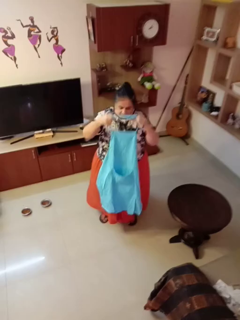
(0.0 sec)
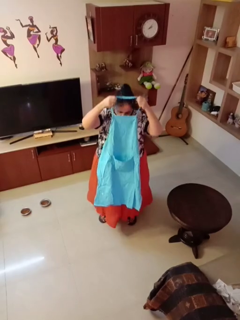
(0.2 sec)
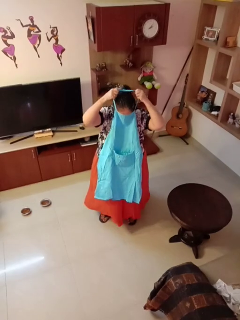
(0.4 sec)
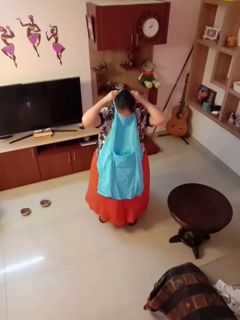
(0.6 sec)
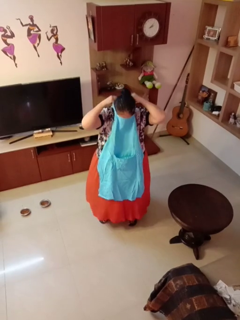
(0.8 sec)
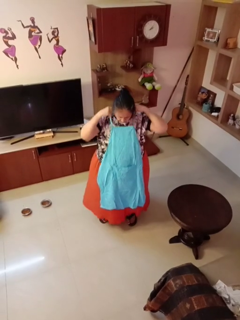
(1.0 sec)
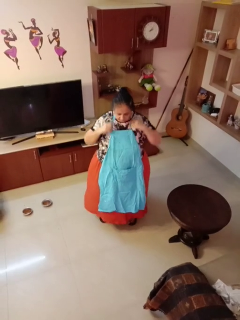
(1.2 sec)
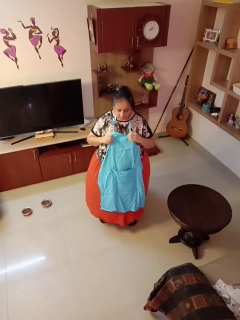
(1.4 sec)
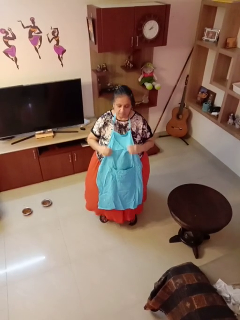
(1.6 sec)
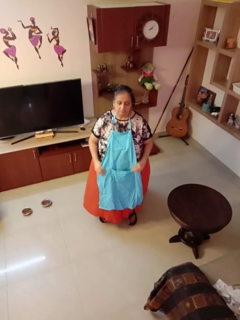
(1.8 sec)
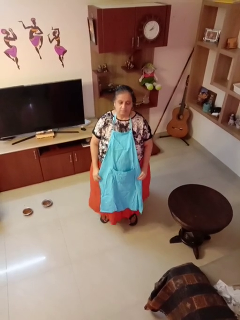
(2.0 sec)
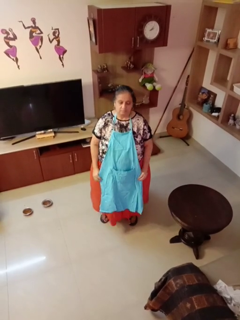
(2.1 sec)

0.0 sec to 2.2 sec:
person puts on apron

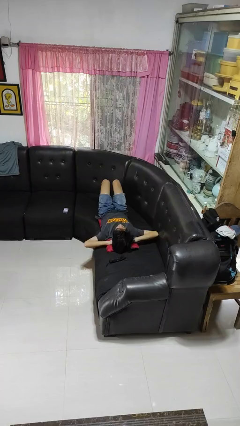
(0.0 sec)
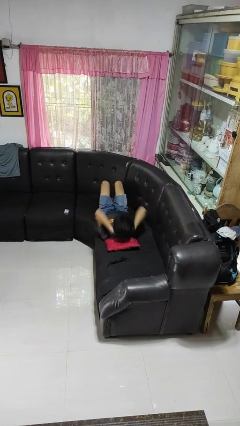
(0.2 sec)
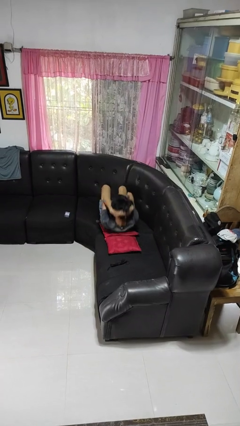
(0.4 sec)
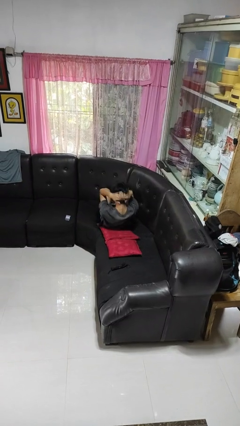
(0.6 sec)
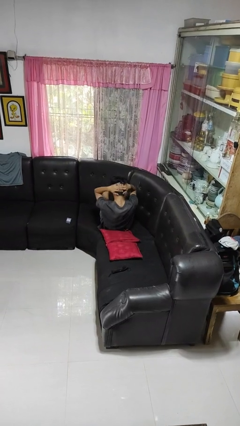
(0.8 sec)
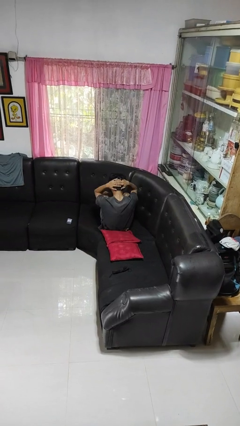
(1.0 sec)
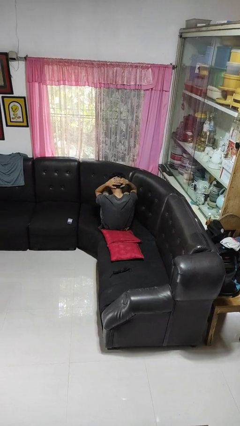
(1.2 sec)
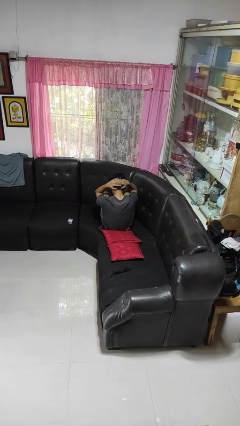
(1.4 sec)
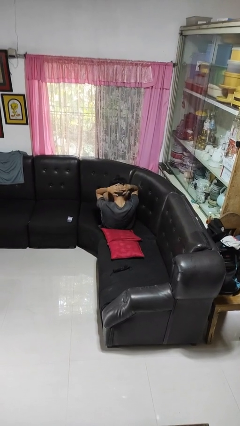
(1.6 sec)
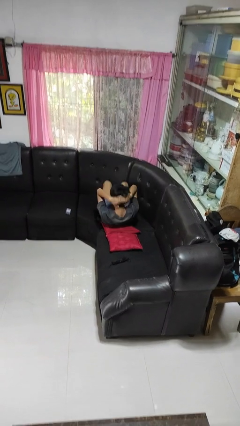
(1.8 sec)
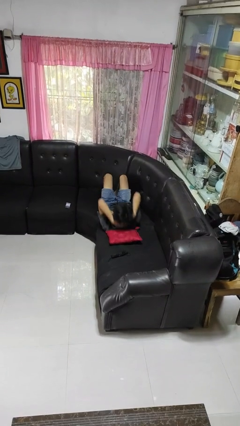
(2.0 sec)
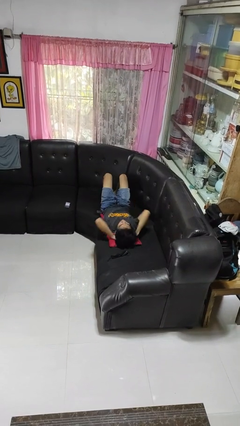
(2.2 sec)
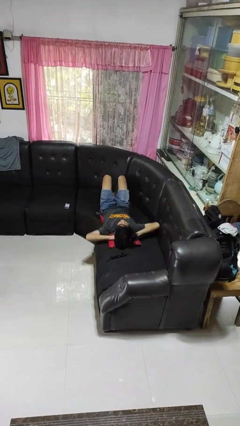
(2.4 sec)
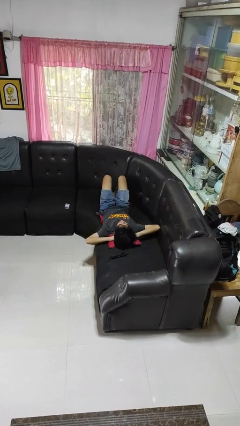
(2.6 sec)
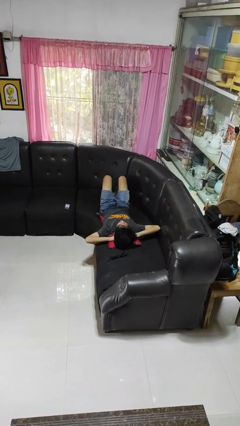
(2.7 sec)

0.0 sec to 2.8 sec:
person exercises with situp

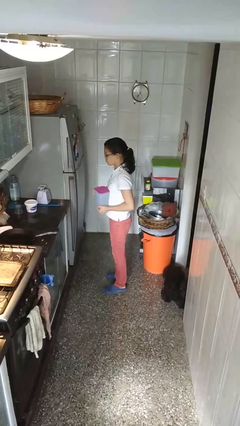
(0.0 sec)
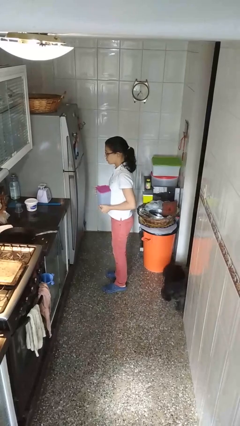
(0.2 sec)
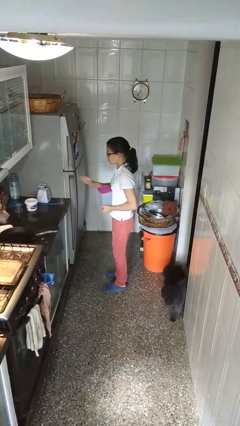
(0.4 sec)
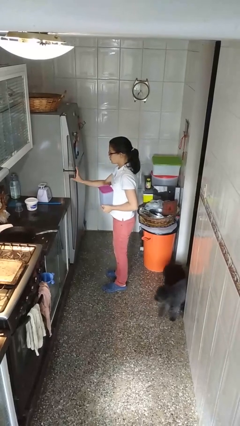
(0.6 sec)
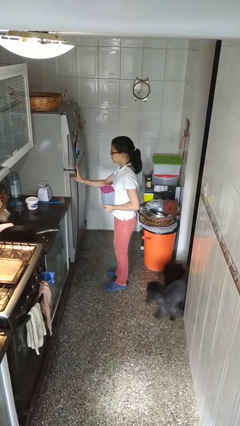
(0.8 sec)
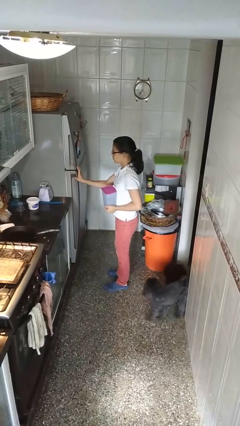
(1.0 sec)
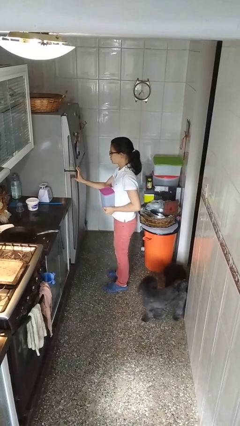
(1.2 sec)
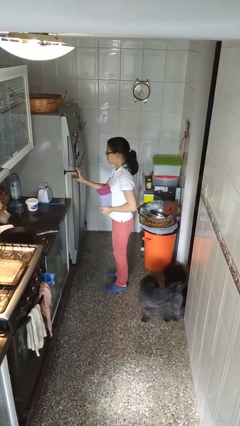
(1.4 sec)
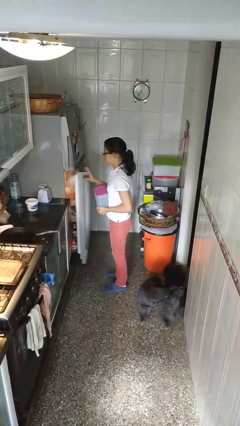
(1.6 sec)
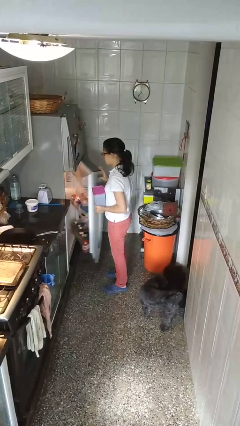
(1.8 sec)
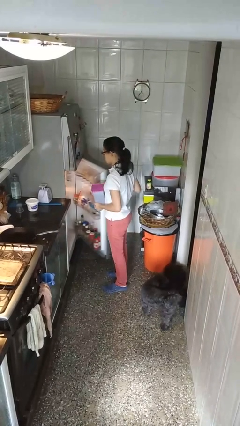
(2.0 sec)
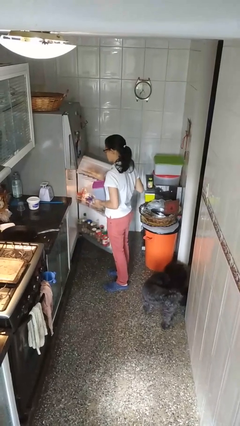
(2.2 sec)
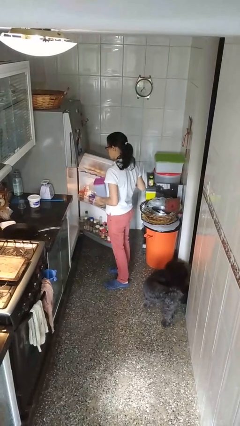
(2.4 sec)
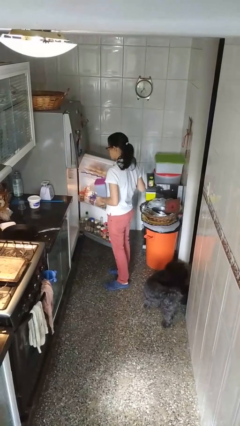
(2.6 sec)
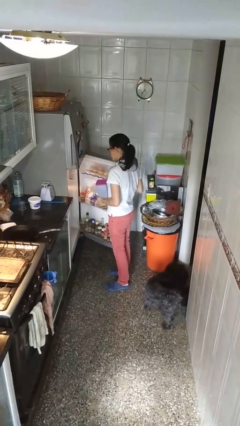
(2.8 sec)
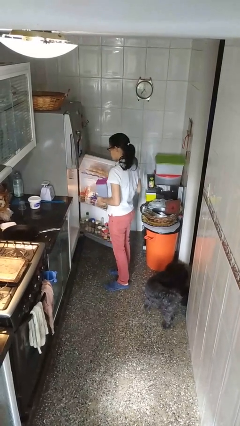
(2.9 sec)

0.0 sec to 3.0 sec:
person opens refrigerator

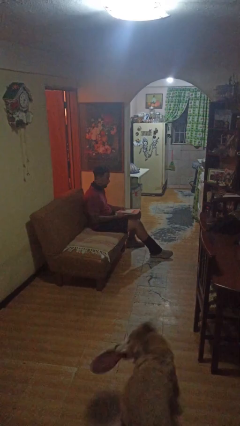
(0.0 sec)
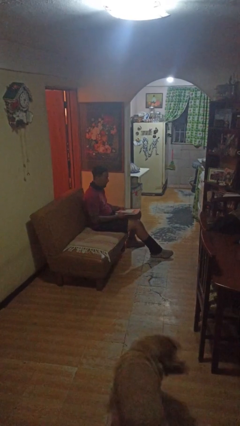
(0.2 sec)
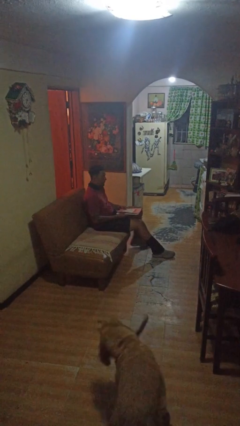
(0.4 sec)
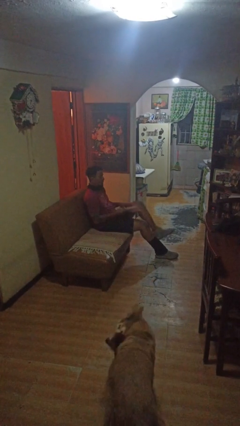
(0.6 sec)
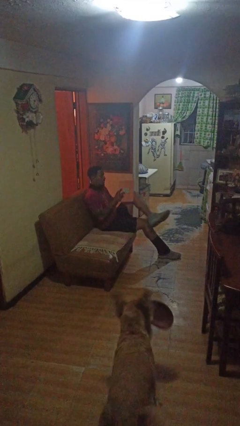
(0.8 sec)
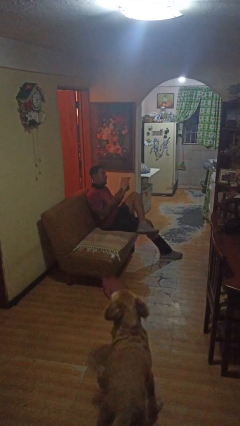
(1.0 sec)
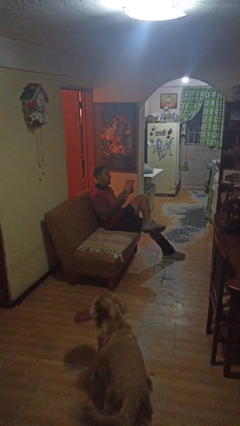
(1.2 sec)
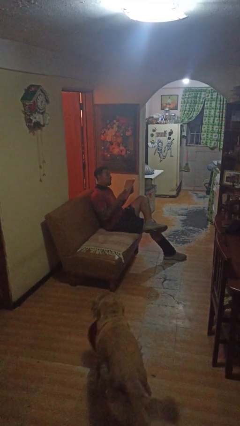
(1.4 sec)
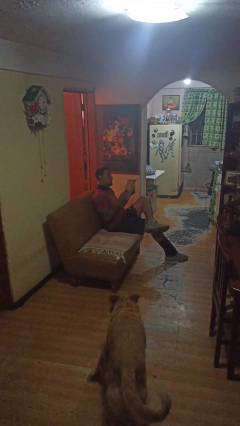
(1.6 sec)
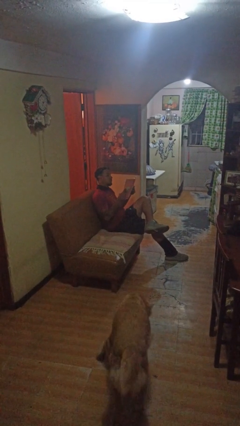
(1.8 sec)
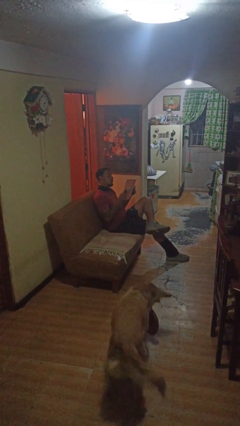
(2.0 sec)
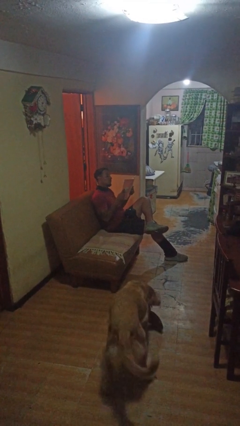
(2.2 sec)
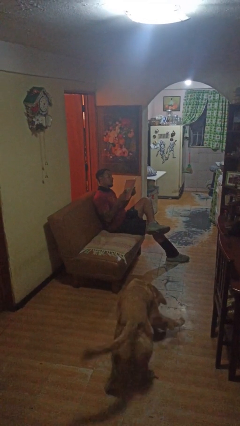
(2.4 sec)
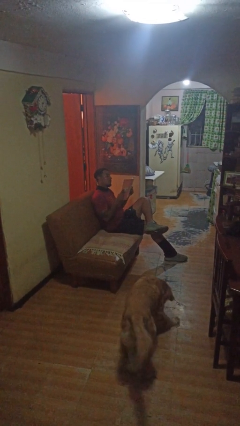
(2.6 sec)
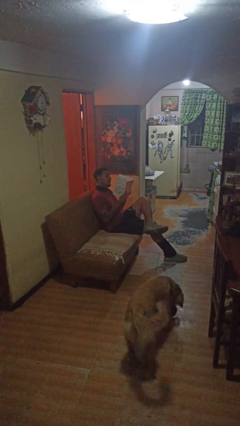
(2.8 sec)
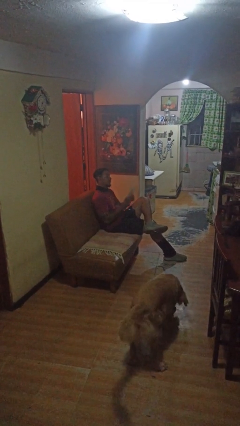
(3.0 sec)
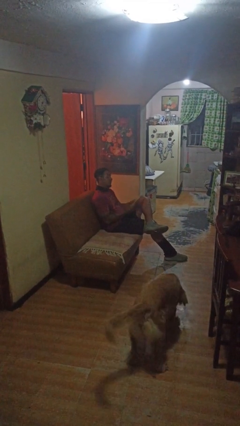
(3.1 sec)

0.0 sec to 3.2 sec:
person reads document

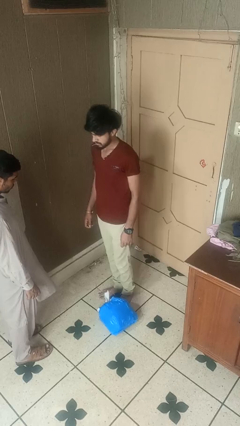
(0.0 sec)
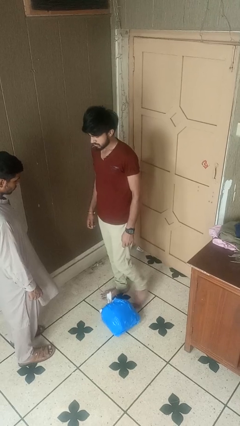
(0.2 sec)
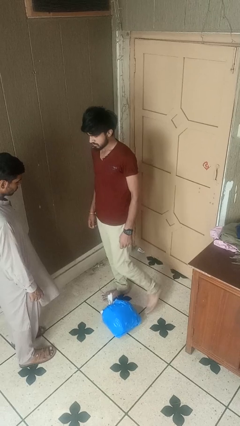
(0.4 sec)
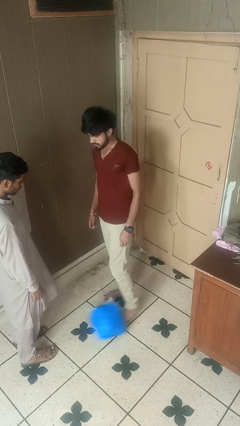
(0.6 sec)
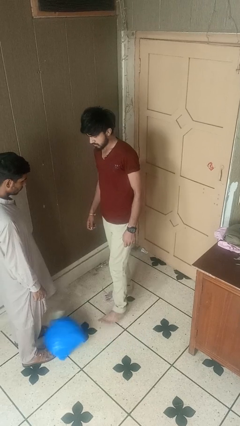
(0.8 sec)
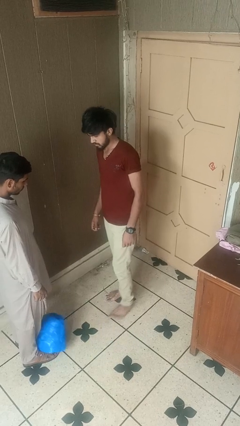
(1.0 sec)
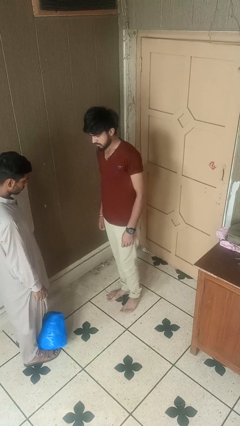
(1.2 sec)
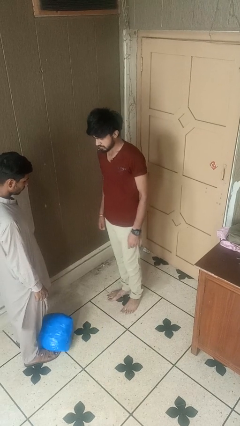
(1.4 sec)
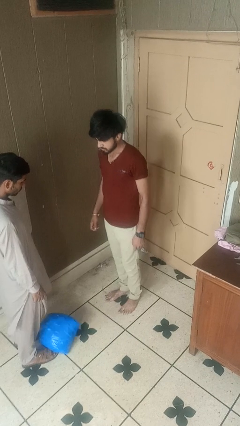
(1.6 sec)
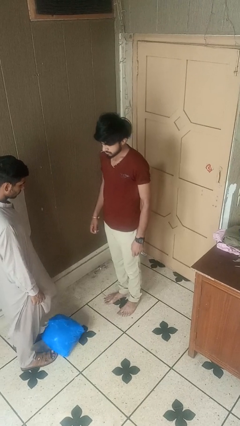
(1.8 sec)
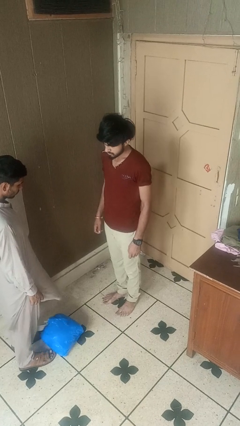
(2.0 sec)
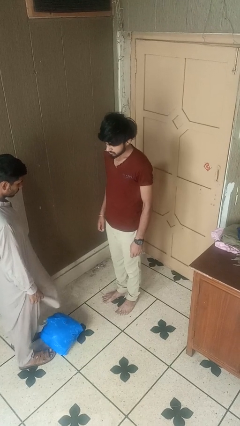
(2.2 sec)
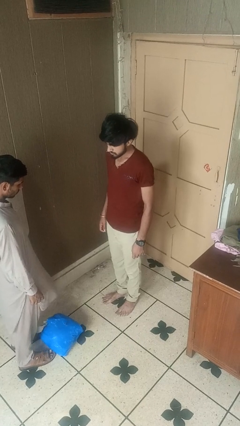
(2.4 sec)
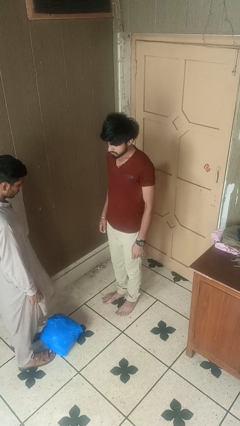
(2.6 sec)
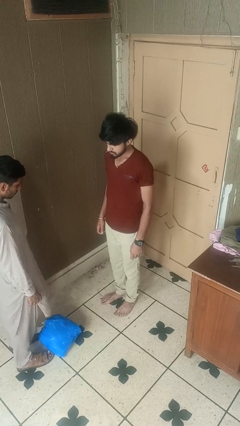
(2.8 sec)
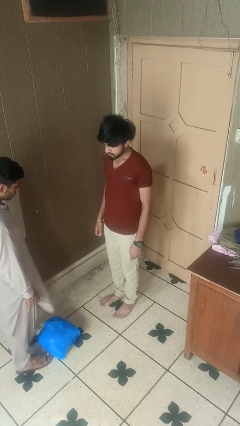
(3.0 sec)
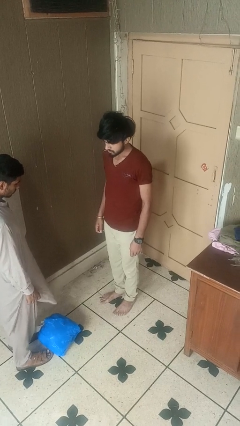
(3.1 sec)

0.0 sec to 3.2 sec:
person kicks object to person

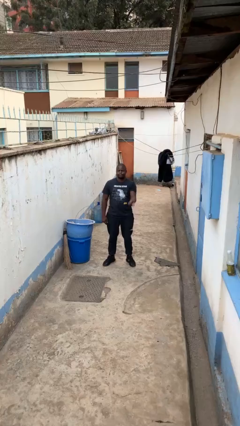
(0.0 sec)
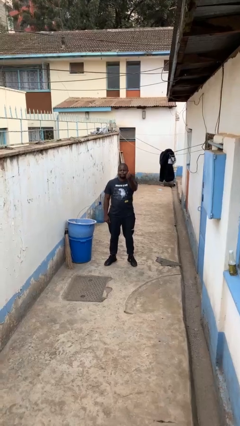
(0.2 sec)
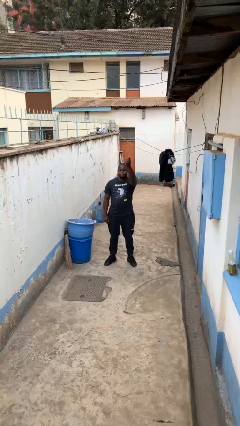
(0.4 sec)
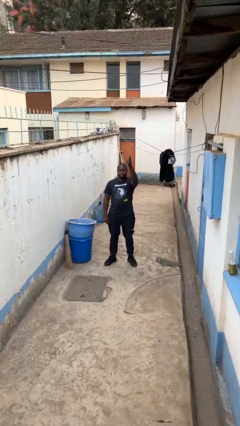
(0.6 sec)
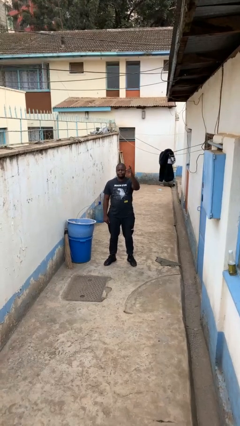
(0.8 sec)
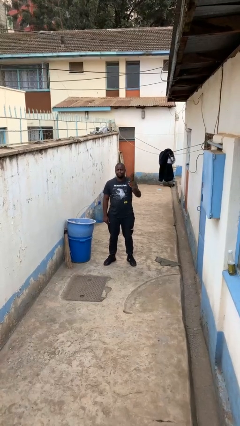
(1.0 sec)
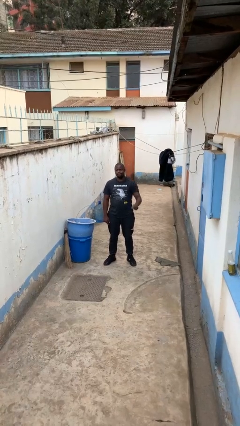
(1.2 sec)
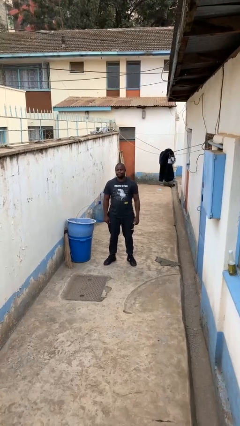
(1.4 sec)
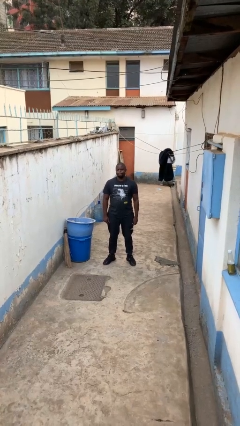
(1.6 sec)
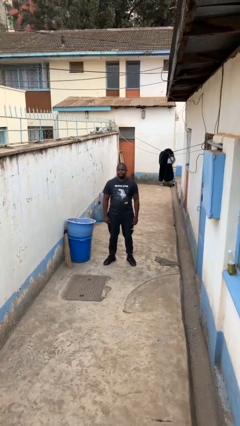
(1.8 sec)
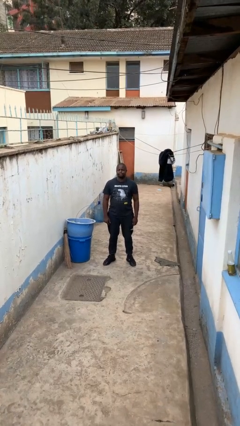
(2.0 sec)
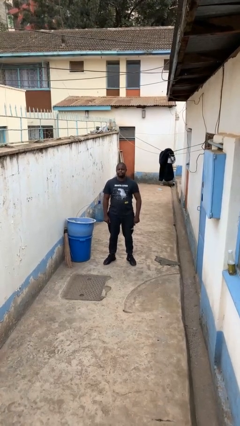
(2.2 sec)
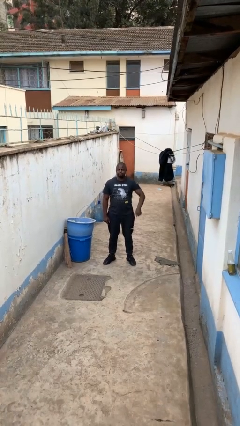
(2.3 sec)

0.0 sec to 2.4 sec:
person gestures swipe up

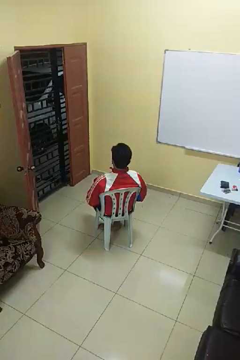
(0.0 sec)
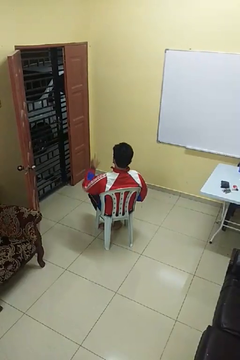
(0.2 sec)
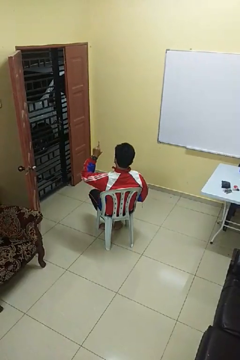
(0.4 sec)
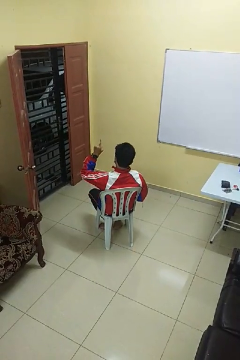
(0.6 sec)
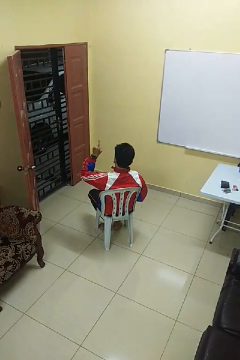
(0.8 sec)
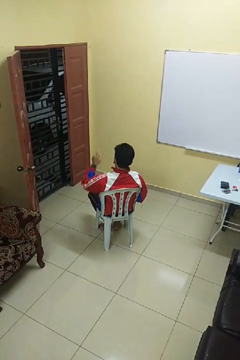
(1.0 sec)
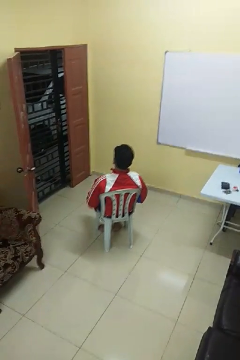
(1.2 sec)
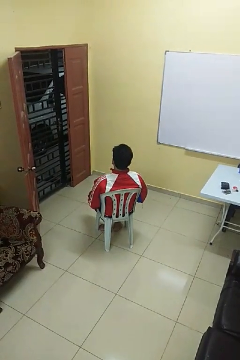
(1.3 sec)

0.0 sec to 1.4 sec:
person gestures number one
